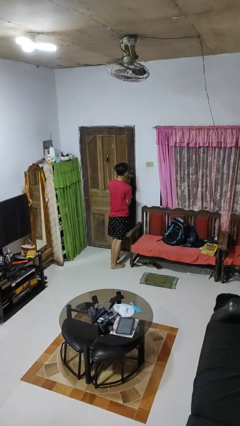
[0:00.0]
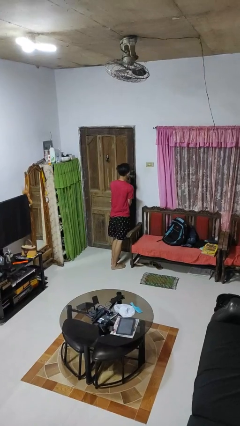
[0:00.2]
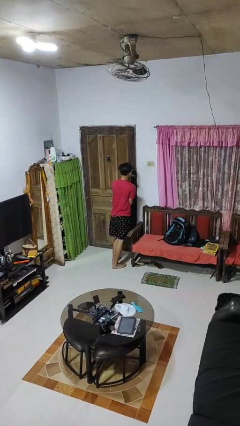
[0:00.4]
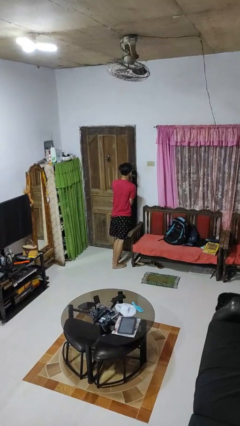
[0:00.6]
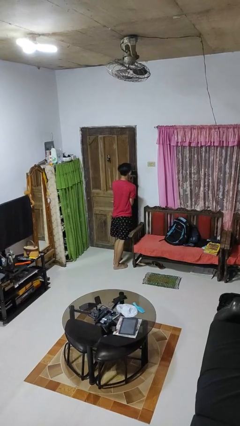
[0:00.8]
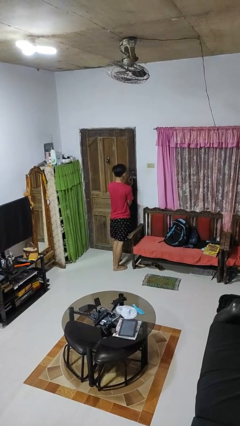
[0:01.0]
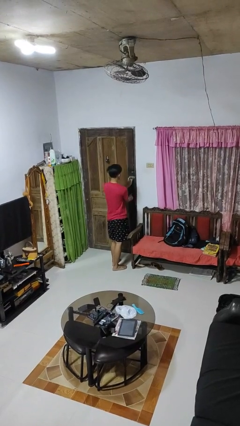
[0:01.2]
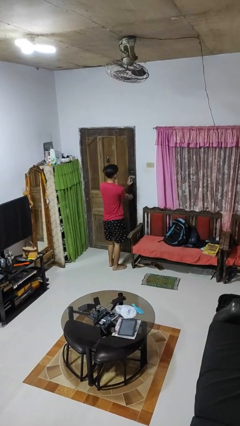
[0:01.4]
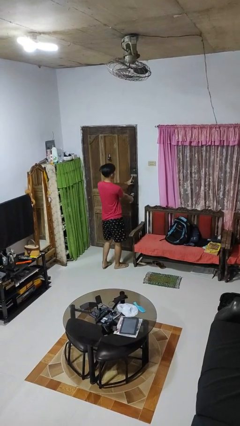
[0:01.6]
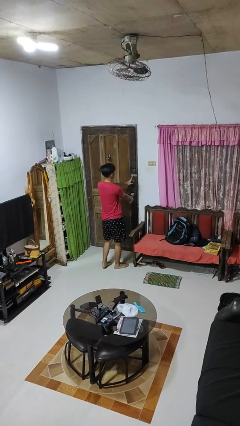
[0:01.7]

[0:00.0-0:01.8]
person locks door with keys

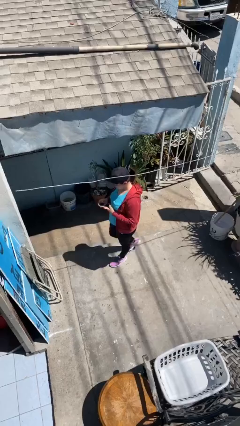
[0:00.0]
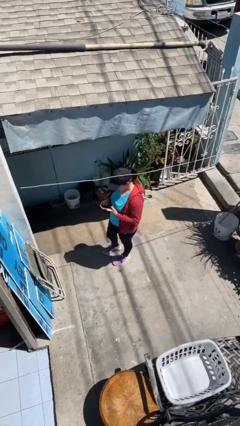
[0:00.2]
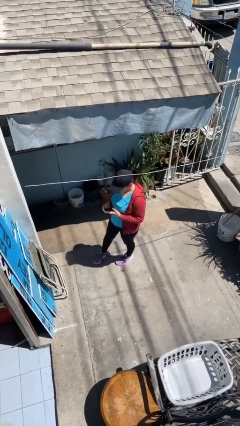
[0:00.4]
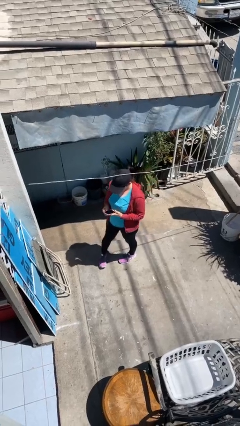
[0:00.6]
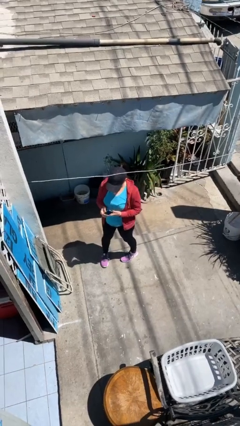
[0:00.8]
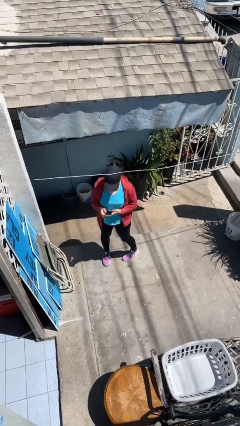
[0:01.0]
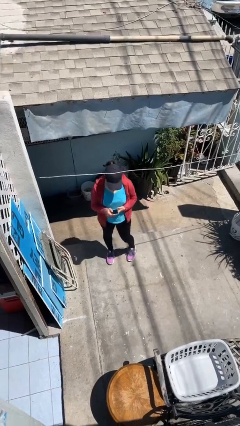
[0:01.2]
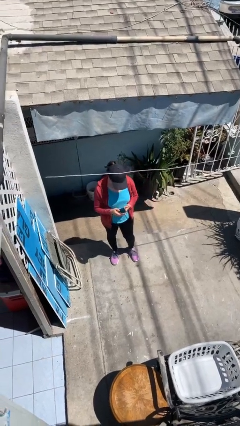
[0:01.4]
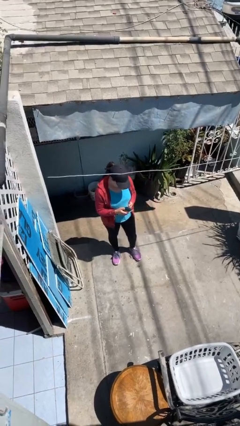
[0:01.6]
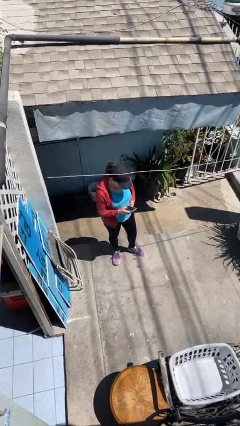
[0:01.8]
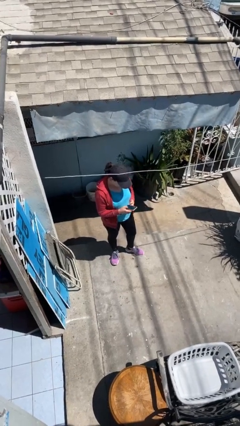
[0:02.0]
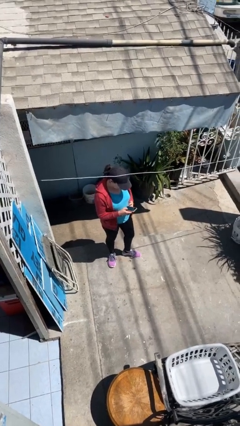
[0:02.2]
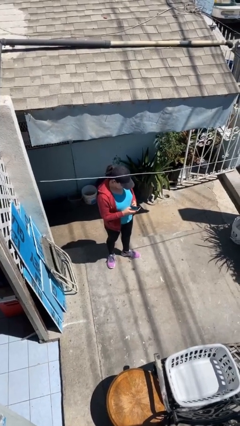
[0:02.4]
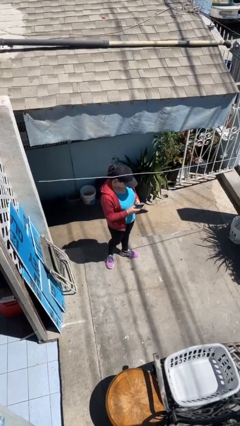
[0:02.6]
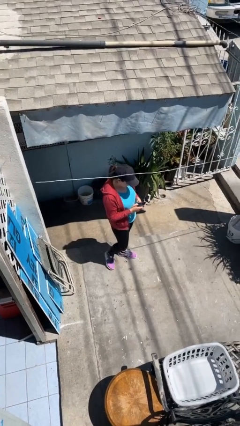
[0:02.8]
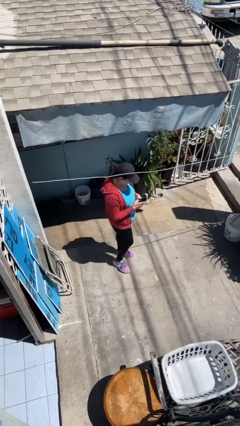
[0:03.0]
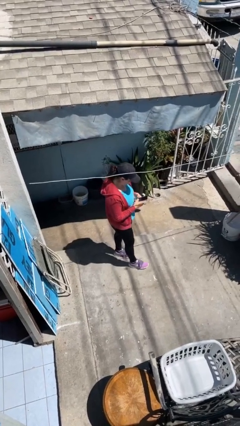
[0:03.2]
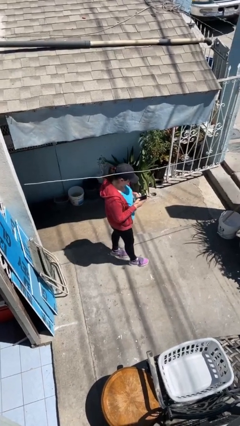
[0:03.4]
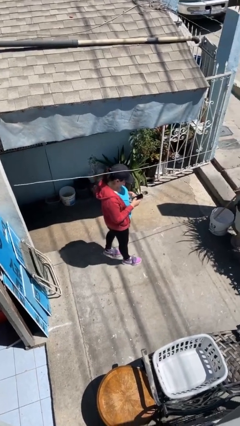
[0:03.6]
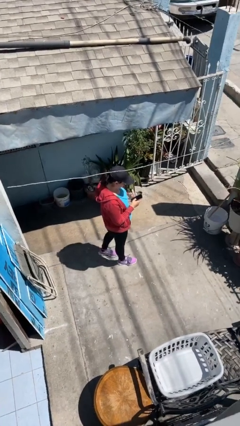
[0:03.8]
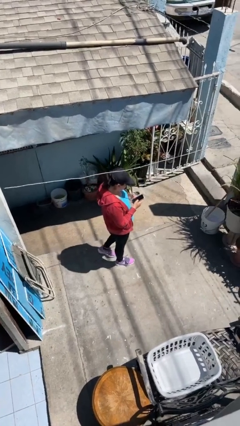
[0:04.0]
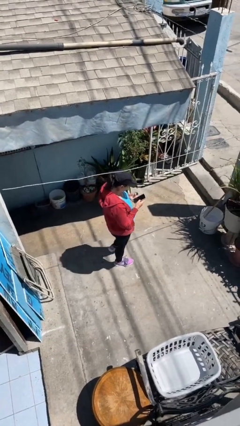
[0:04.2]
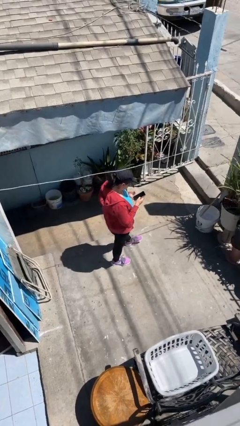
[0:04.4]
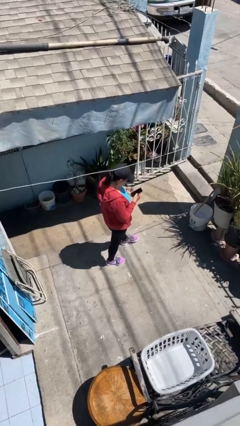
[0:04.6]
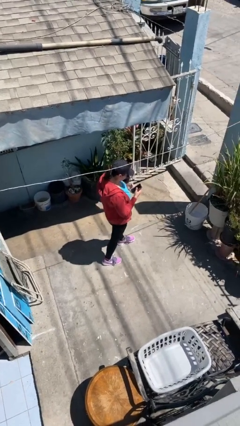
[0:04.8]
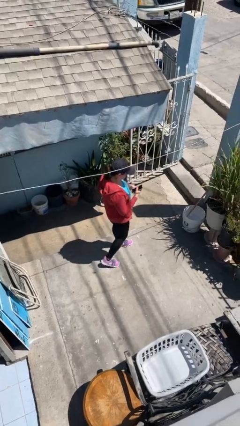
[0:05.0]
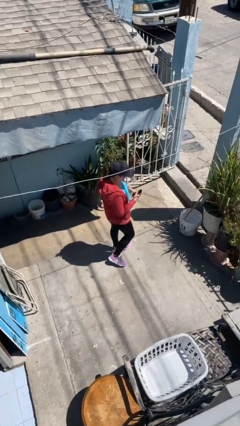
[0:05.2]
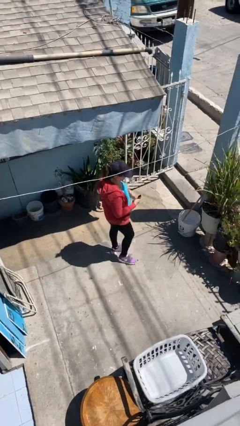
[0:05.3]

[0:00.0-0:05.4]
person texts on phone

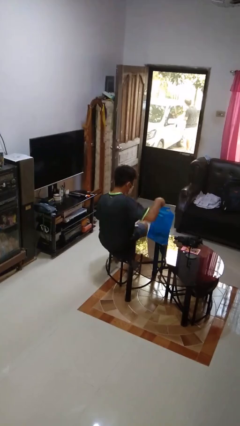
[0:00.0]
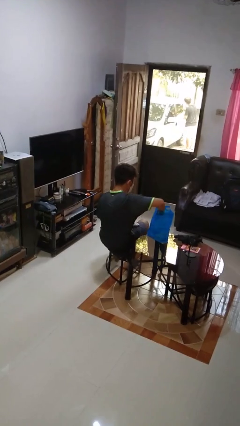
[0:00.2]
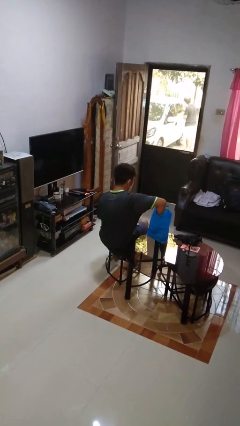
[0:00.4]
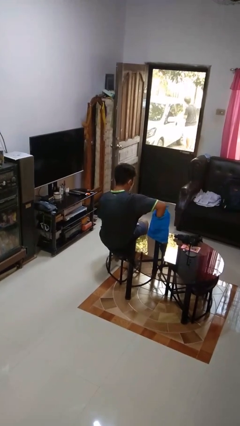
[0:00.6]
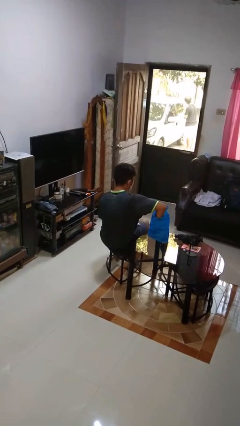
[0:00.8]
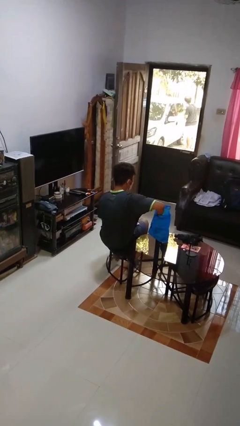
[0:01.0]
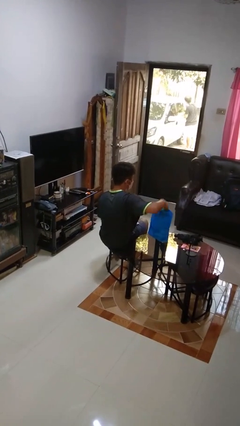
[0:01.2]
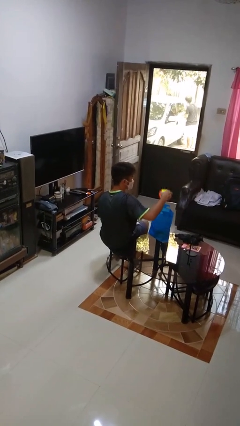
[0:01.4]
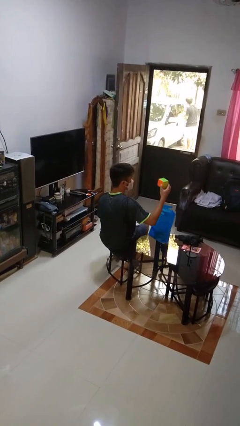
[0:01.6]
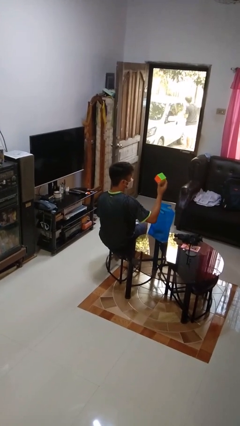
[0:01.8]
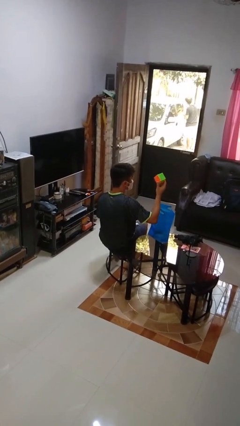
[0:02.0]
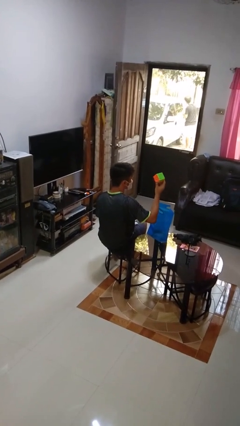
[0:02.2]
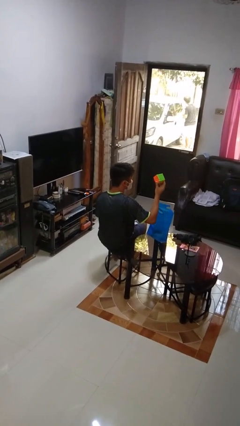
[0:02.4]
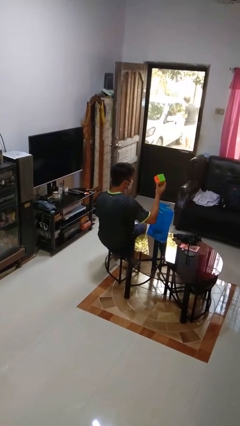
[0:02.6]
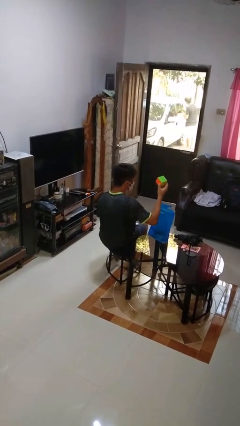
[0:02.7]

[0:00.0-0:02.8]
person takes object from bag

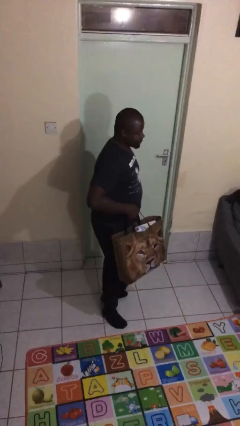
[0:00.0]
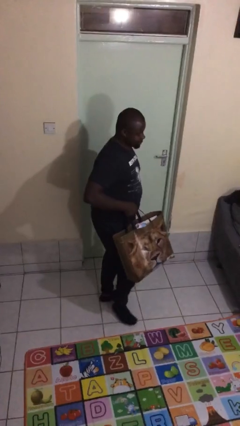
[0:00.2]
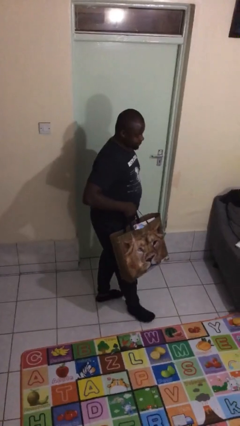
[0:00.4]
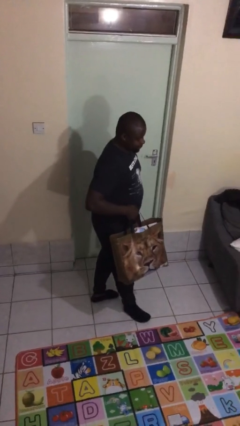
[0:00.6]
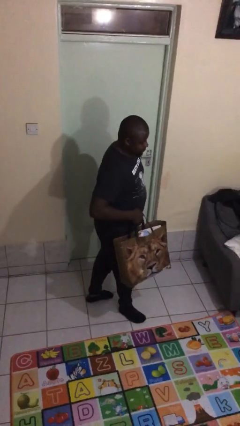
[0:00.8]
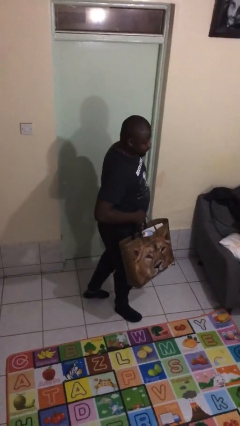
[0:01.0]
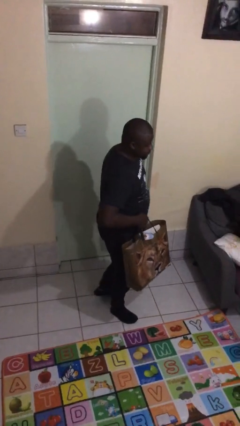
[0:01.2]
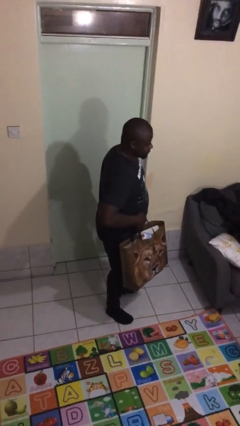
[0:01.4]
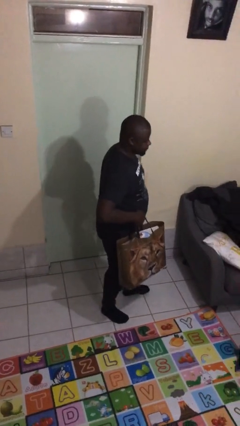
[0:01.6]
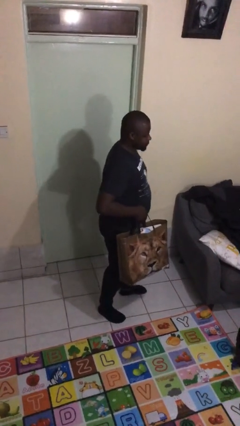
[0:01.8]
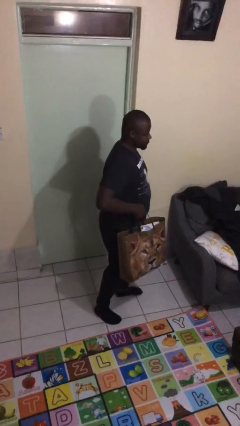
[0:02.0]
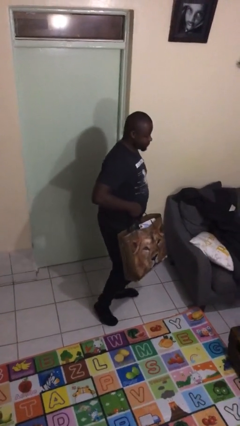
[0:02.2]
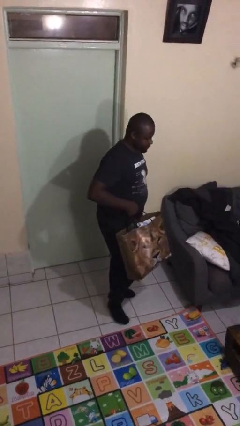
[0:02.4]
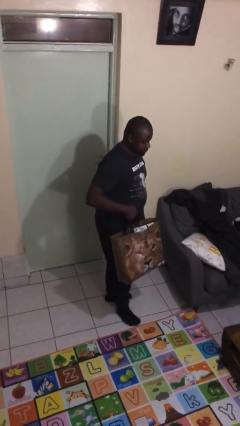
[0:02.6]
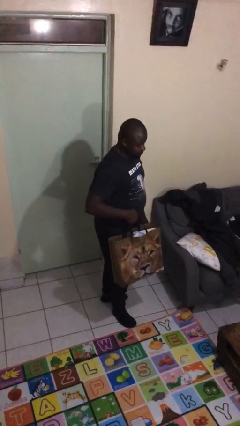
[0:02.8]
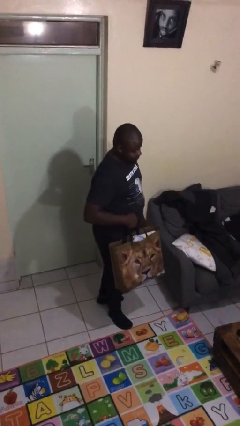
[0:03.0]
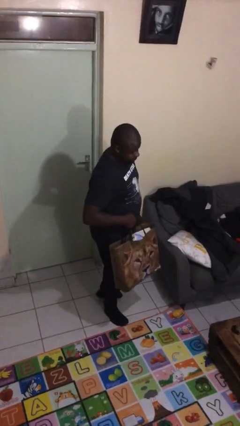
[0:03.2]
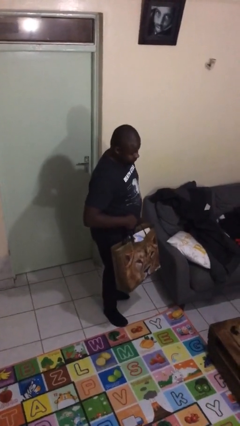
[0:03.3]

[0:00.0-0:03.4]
person carries groceries

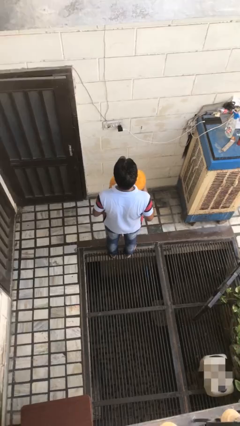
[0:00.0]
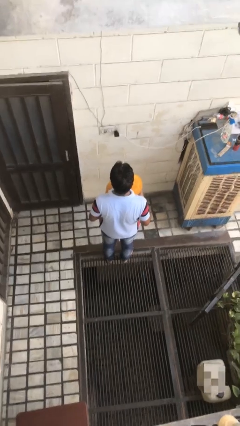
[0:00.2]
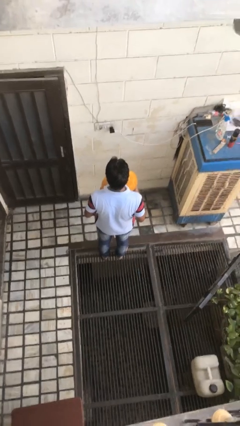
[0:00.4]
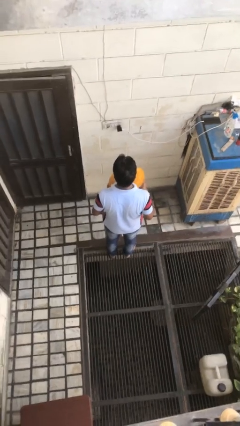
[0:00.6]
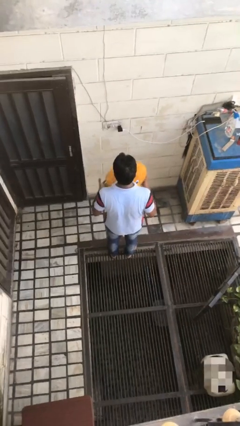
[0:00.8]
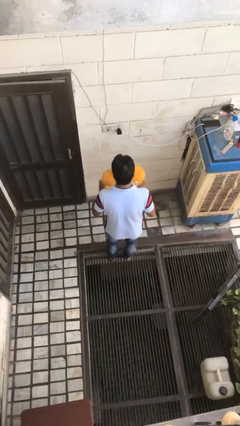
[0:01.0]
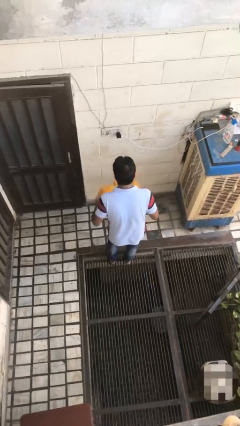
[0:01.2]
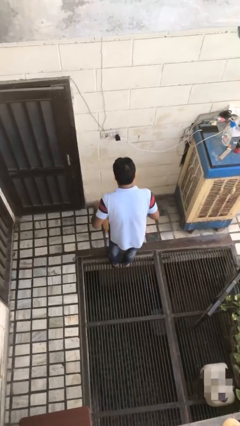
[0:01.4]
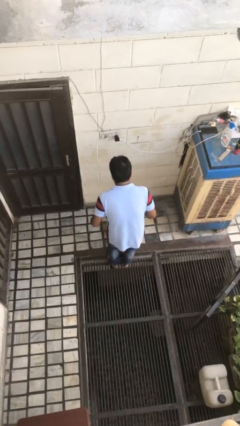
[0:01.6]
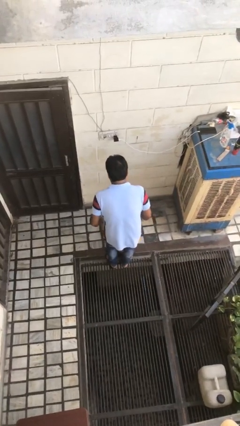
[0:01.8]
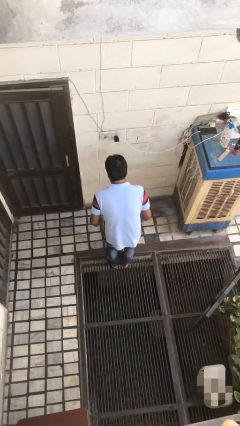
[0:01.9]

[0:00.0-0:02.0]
person throws object to ground

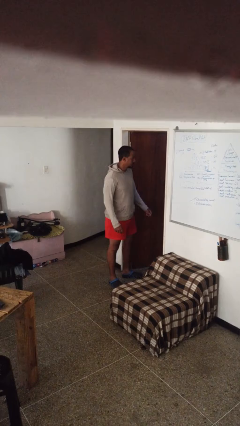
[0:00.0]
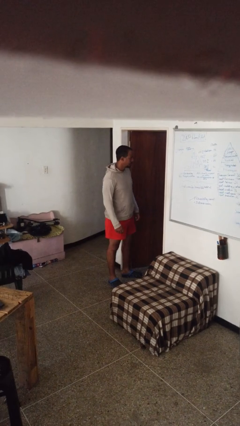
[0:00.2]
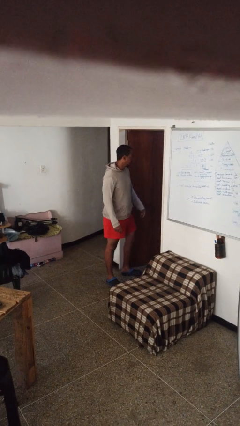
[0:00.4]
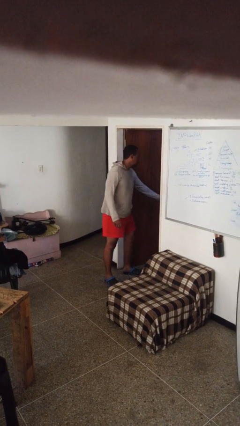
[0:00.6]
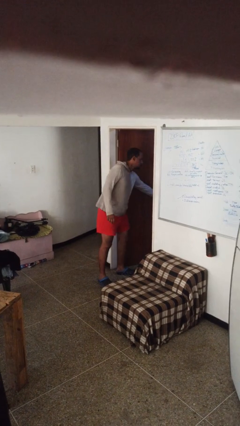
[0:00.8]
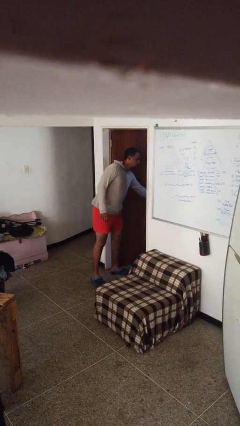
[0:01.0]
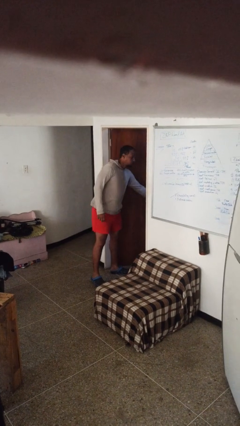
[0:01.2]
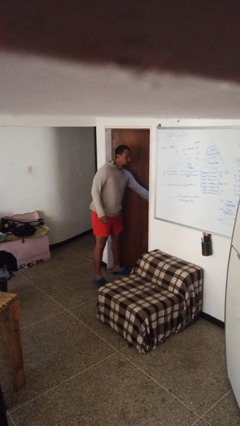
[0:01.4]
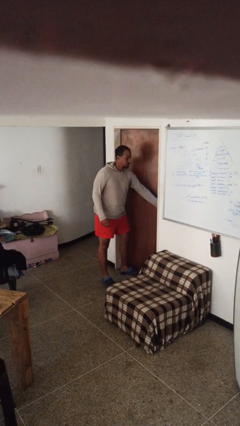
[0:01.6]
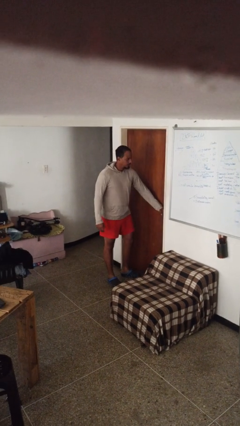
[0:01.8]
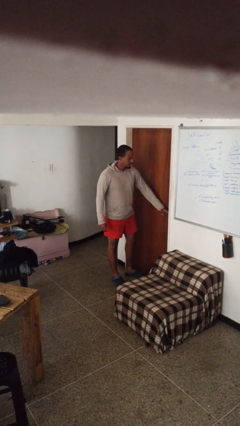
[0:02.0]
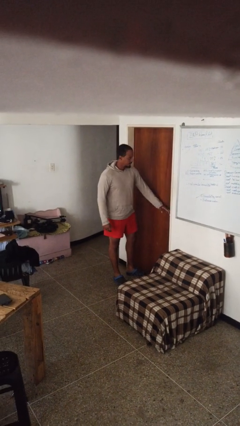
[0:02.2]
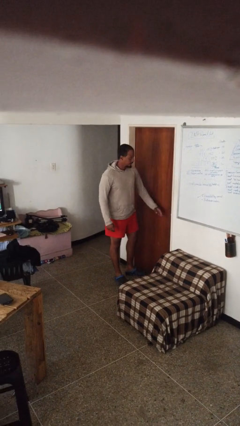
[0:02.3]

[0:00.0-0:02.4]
person closes facility door
